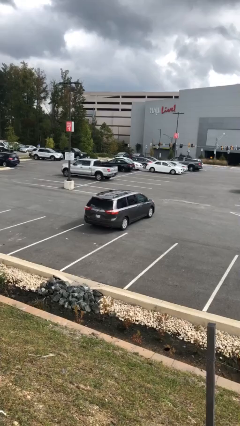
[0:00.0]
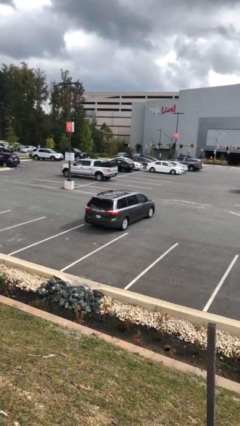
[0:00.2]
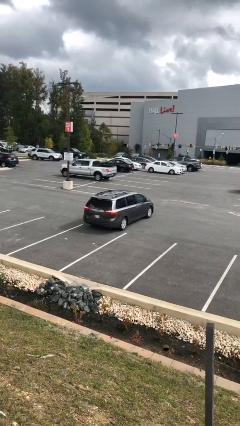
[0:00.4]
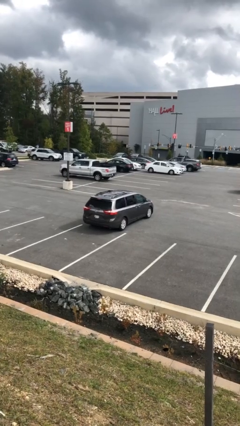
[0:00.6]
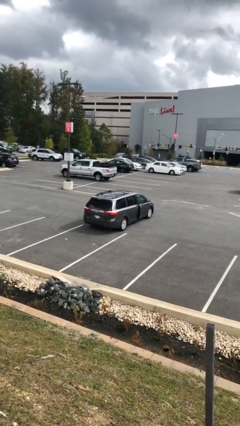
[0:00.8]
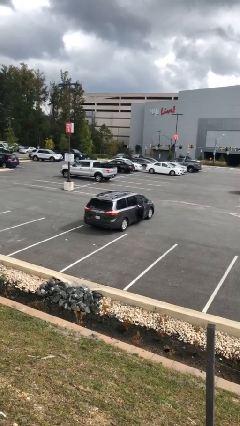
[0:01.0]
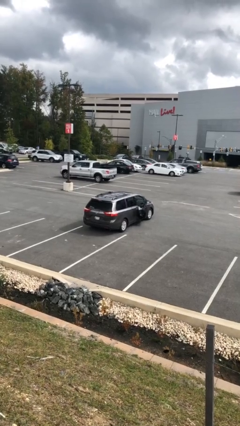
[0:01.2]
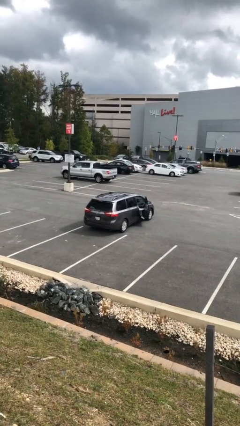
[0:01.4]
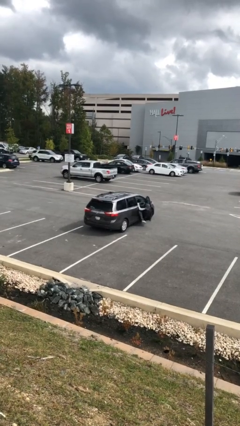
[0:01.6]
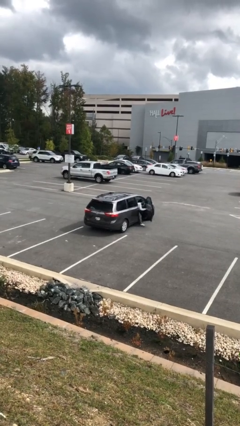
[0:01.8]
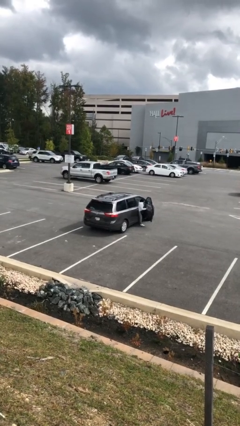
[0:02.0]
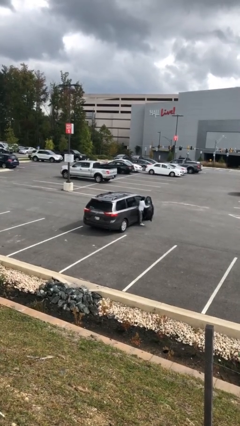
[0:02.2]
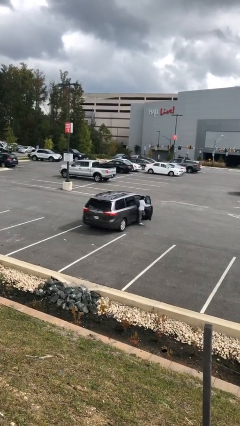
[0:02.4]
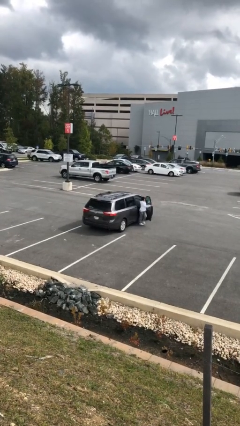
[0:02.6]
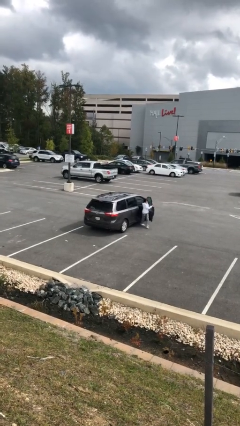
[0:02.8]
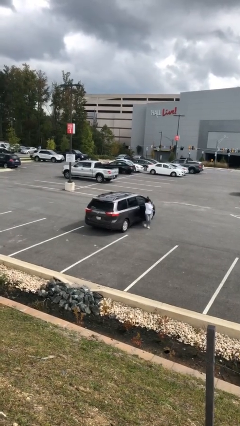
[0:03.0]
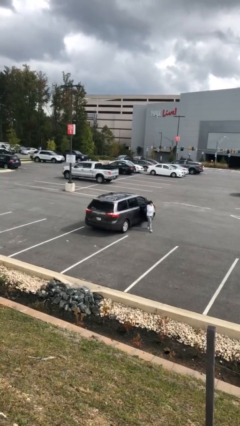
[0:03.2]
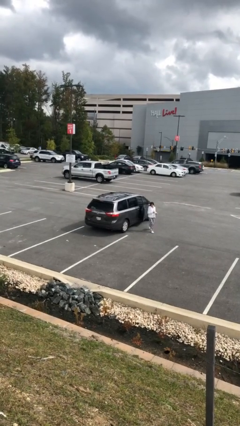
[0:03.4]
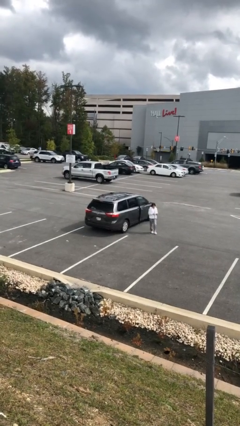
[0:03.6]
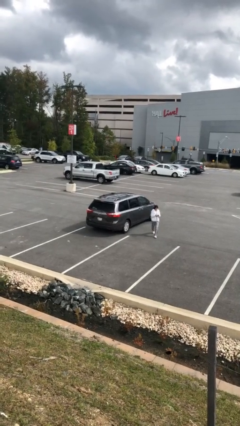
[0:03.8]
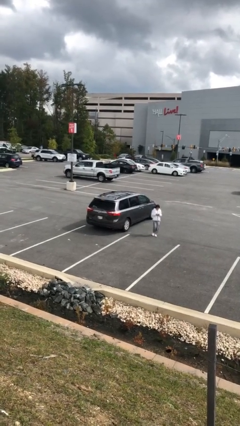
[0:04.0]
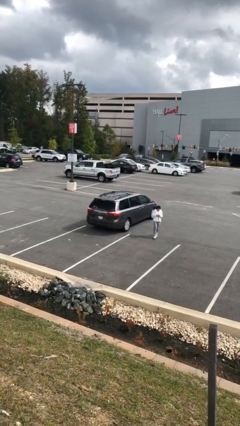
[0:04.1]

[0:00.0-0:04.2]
car drops off person

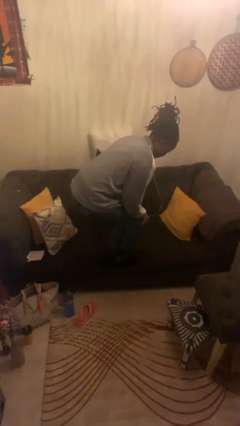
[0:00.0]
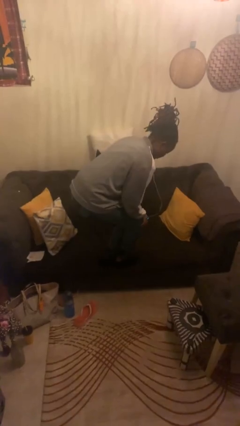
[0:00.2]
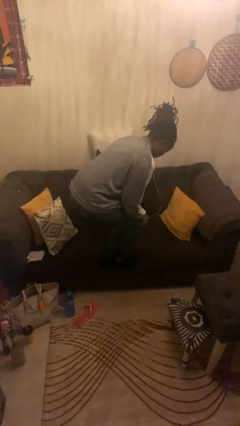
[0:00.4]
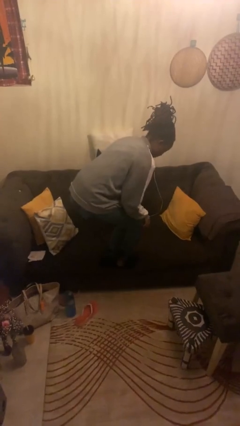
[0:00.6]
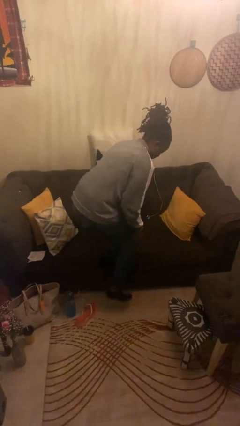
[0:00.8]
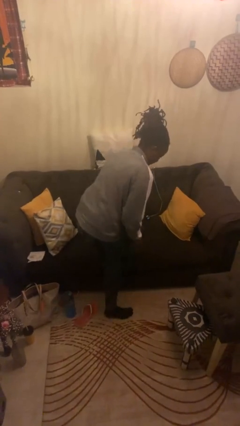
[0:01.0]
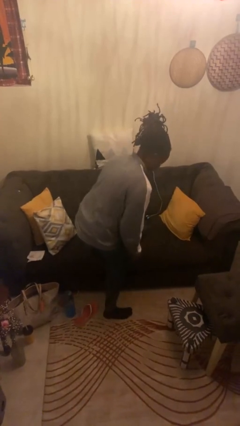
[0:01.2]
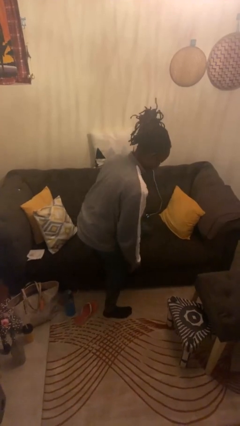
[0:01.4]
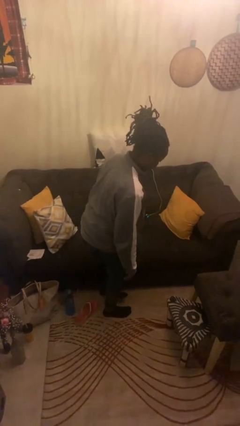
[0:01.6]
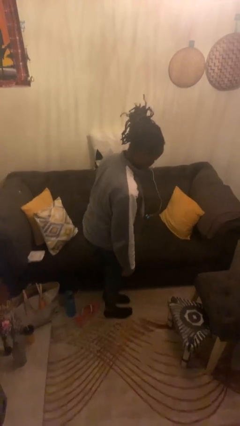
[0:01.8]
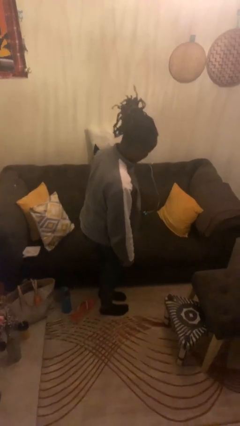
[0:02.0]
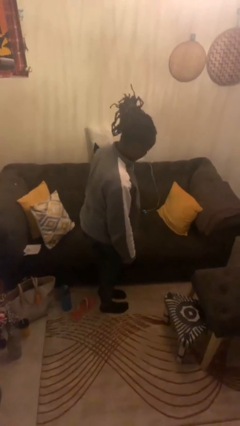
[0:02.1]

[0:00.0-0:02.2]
person climbs off chair

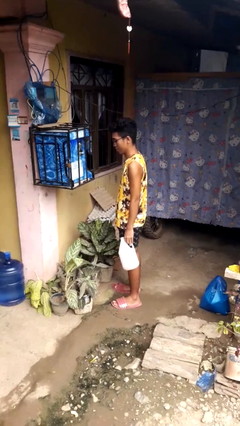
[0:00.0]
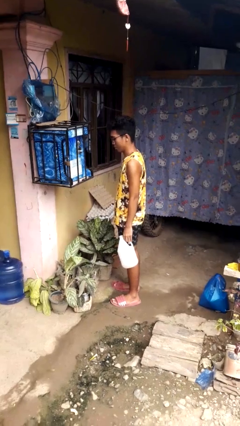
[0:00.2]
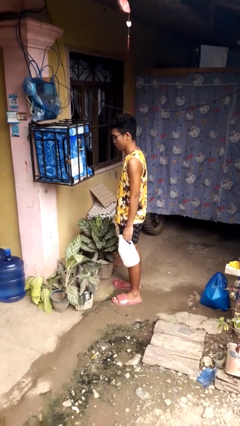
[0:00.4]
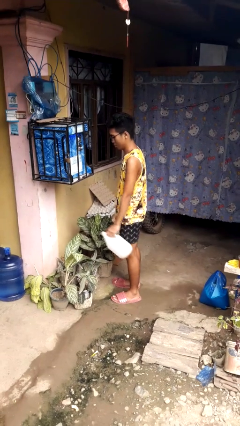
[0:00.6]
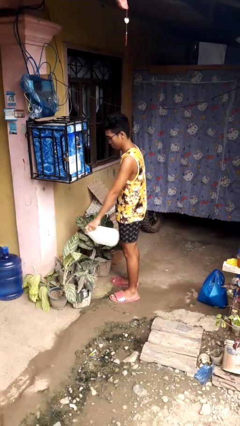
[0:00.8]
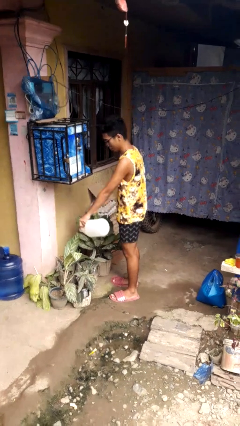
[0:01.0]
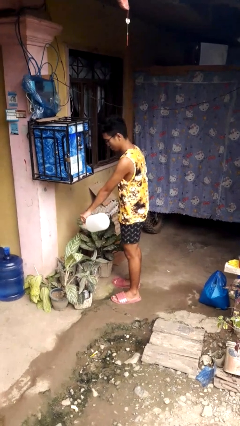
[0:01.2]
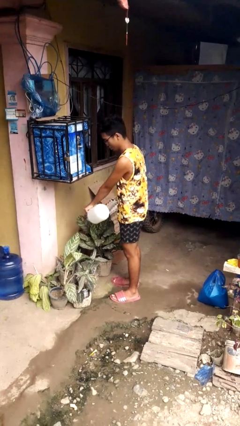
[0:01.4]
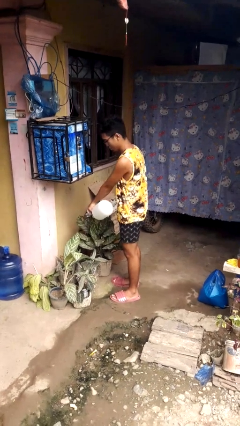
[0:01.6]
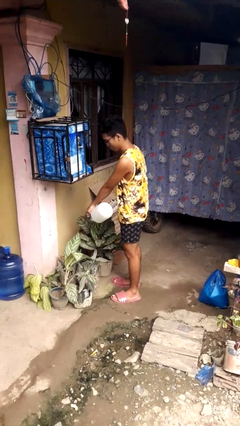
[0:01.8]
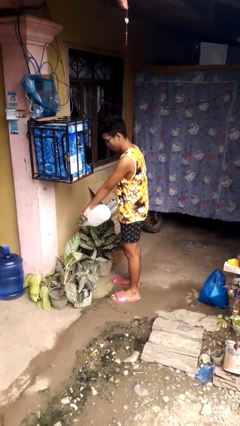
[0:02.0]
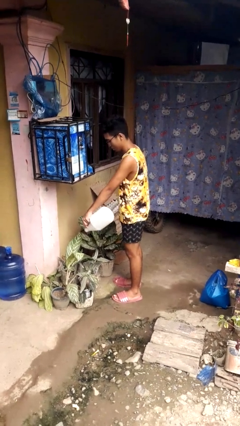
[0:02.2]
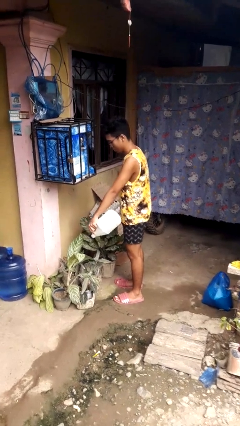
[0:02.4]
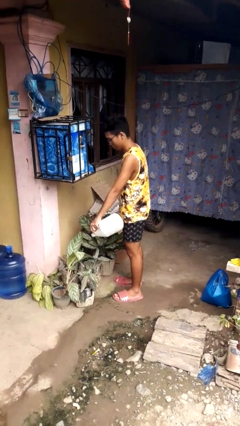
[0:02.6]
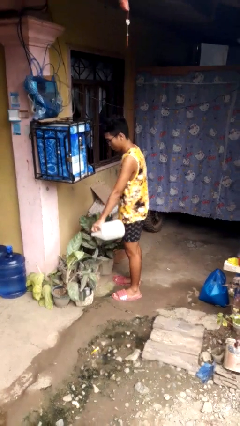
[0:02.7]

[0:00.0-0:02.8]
person waters houseplant

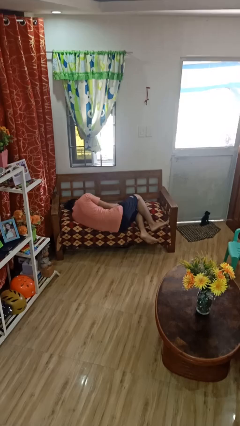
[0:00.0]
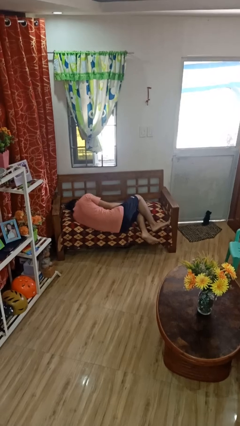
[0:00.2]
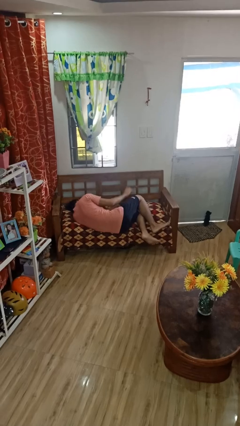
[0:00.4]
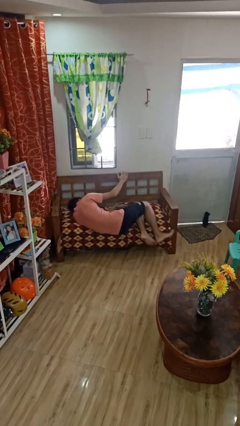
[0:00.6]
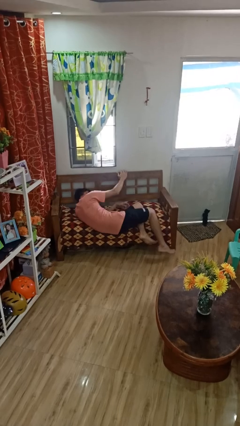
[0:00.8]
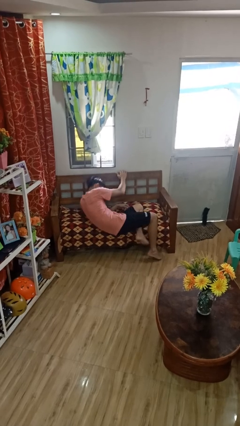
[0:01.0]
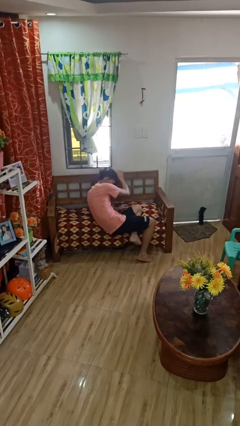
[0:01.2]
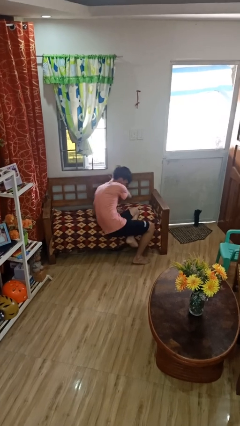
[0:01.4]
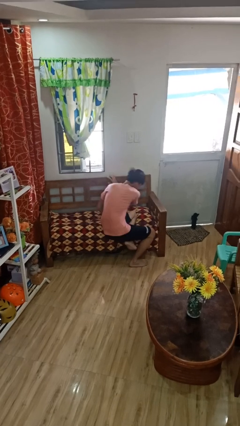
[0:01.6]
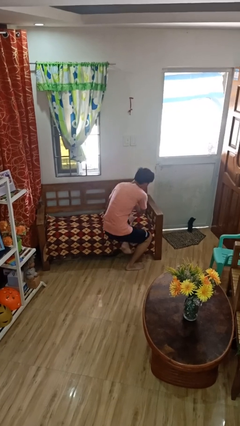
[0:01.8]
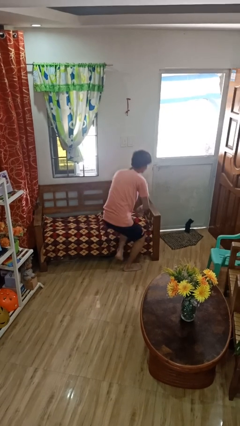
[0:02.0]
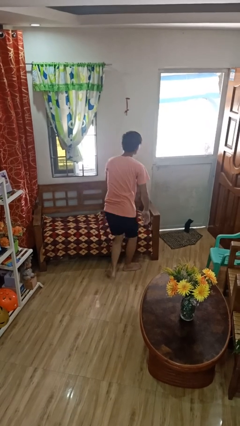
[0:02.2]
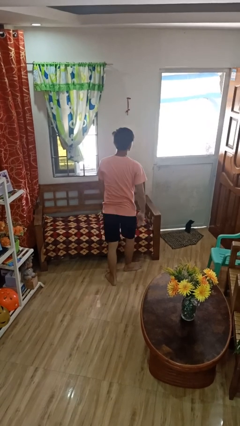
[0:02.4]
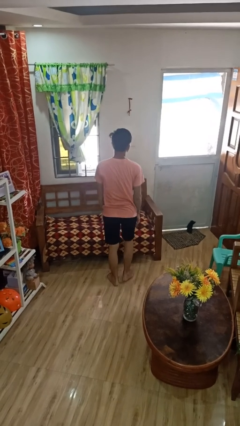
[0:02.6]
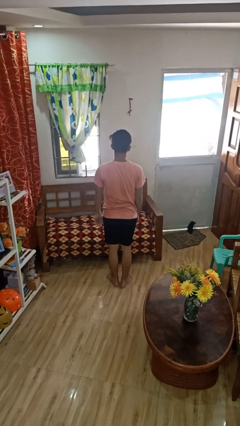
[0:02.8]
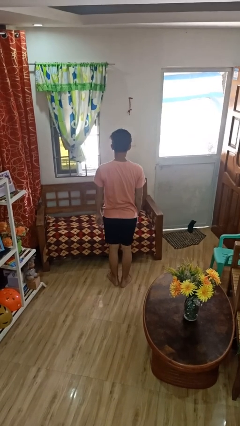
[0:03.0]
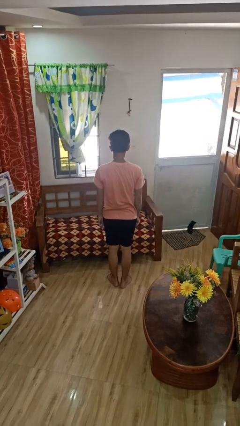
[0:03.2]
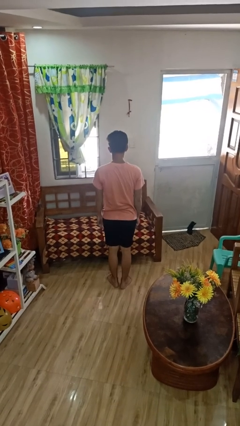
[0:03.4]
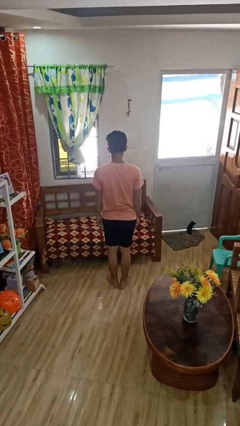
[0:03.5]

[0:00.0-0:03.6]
person stands up

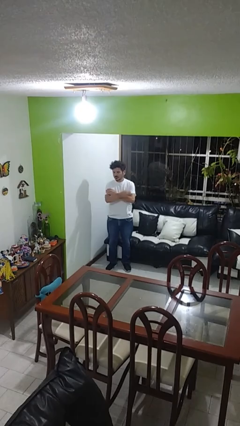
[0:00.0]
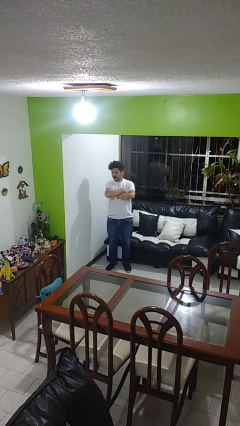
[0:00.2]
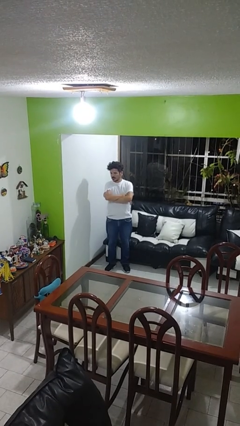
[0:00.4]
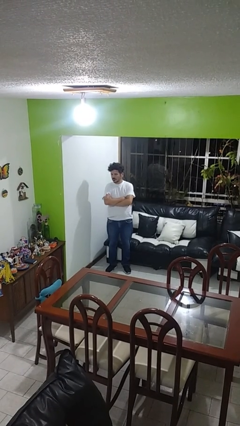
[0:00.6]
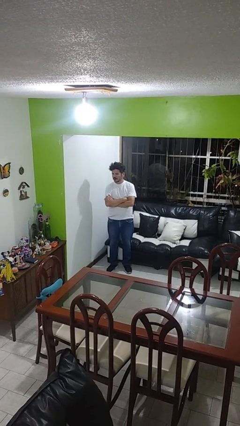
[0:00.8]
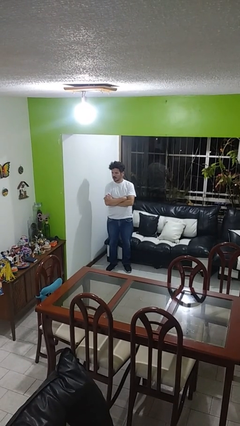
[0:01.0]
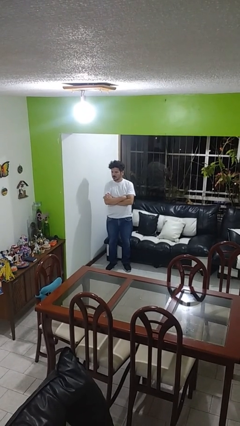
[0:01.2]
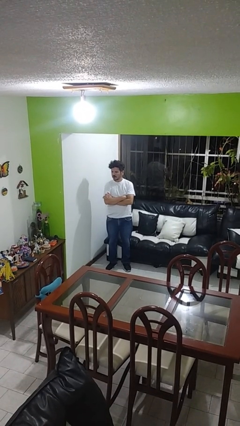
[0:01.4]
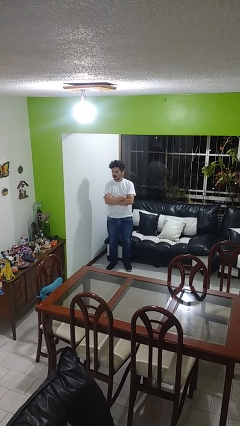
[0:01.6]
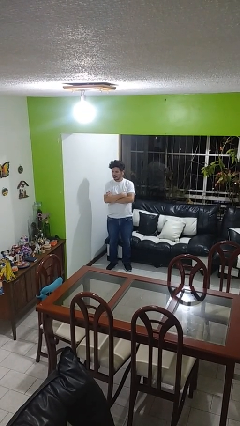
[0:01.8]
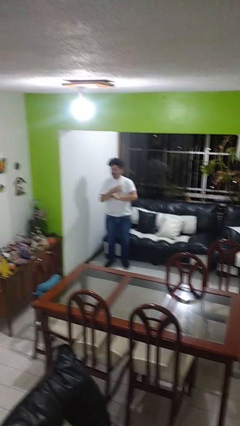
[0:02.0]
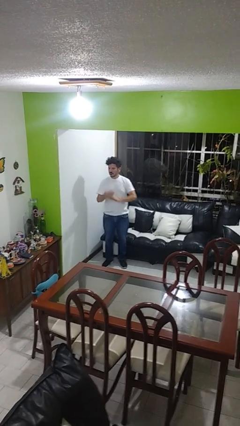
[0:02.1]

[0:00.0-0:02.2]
person crosses arms

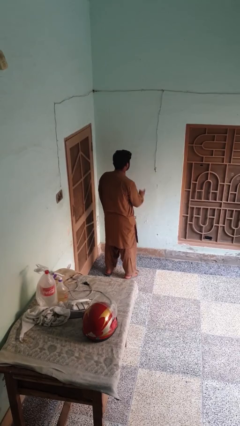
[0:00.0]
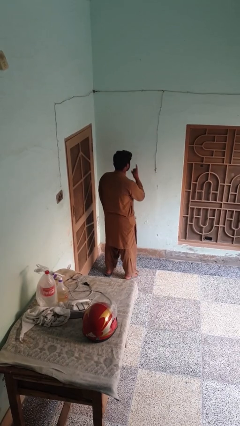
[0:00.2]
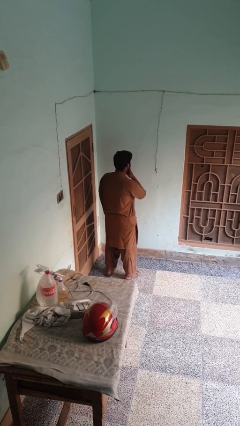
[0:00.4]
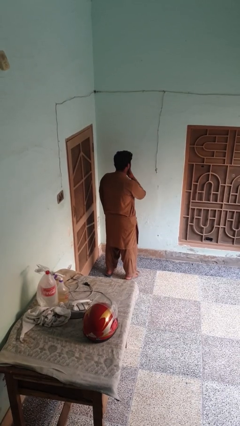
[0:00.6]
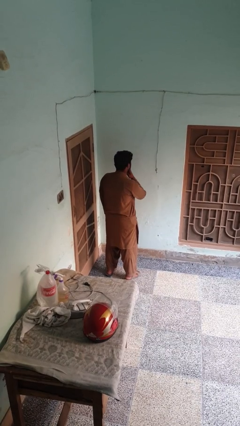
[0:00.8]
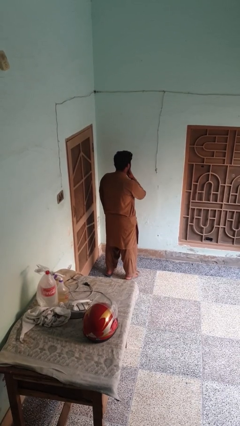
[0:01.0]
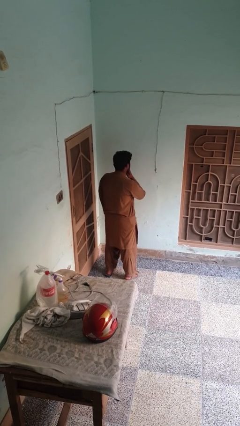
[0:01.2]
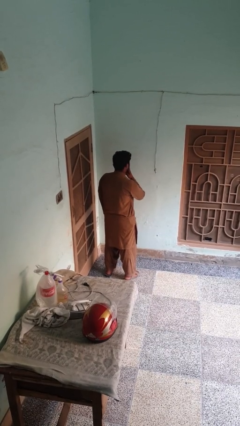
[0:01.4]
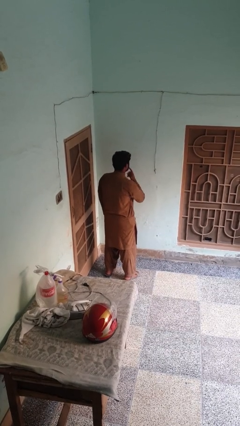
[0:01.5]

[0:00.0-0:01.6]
person gestures be quiet

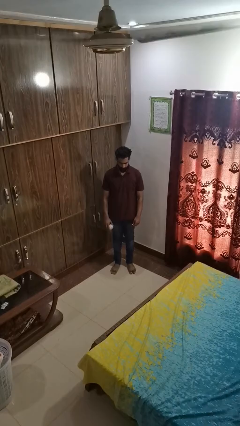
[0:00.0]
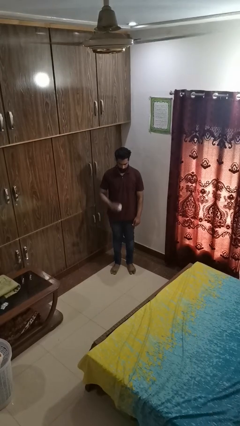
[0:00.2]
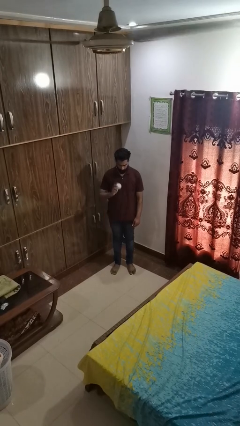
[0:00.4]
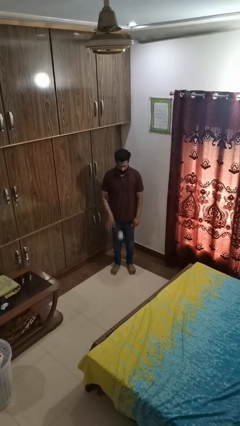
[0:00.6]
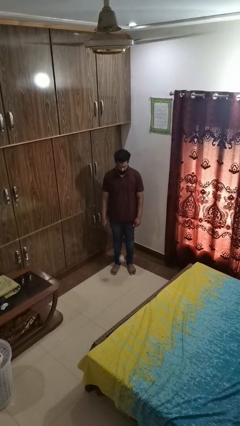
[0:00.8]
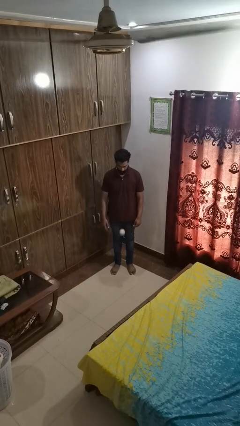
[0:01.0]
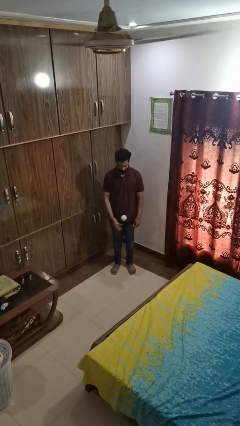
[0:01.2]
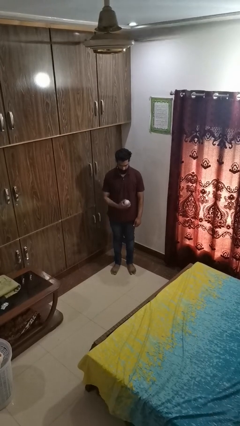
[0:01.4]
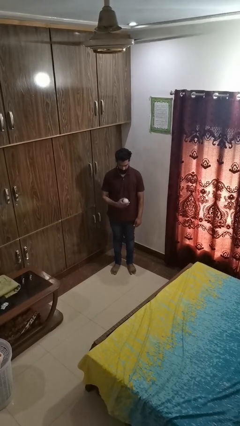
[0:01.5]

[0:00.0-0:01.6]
person bounces ball on floor
